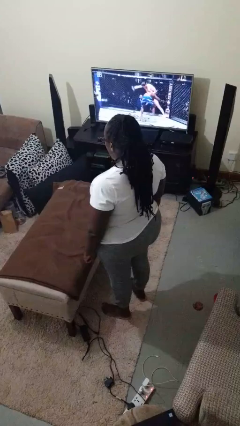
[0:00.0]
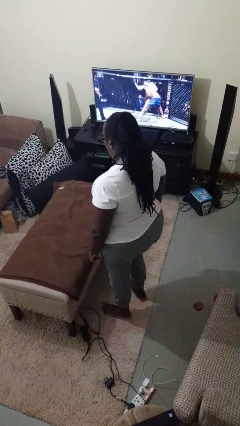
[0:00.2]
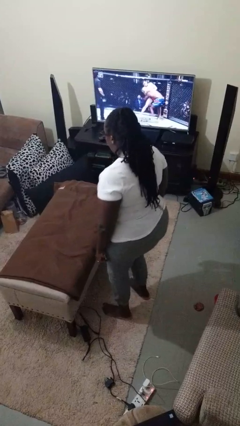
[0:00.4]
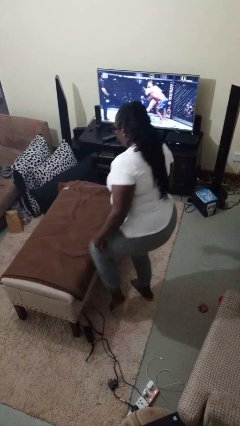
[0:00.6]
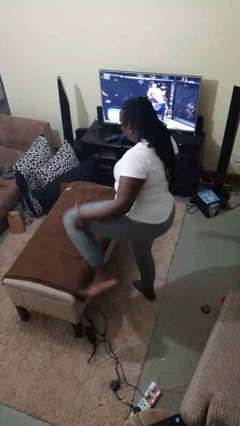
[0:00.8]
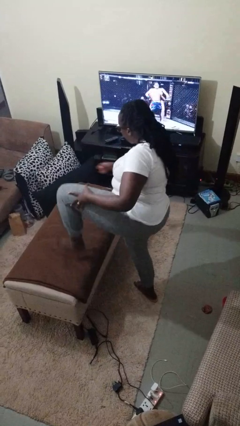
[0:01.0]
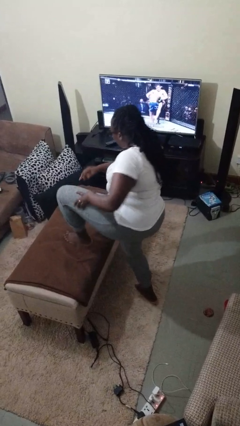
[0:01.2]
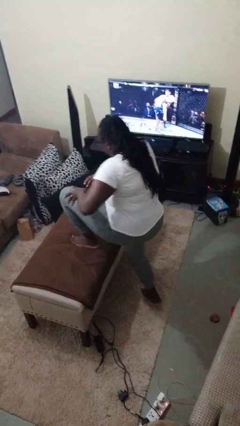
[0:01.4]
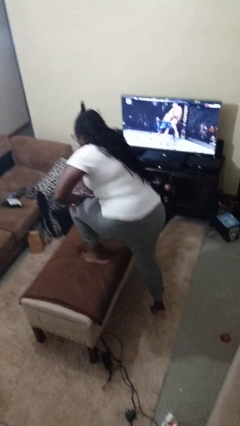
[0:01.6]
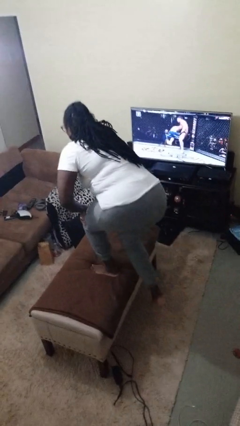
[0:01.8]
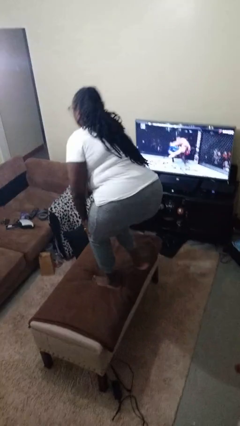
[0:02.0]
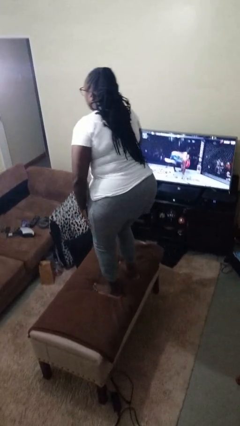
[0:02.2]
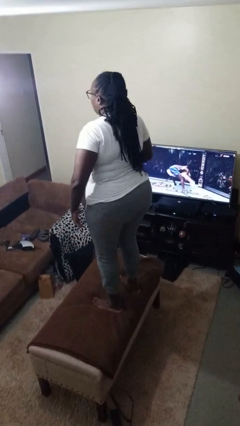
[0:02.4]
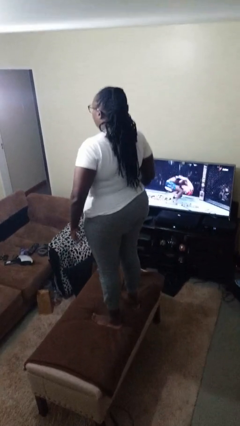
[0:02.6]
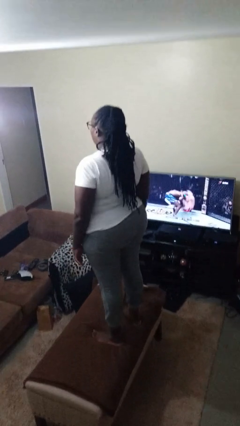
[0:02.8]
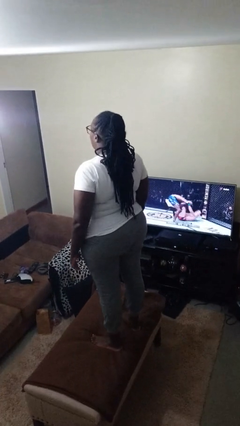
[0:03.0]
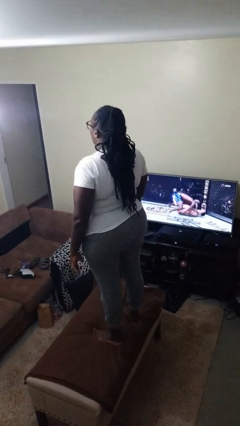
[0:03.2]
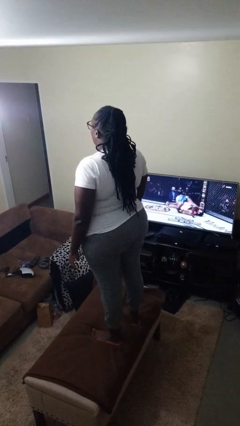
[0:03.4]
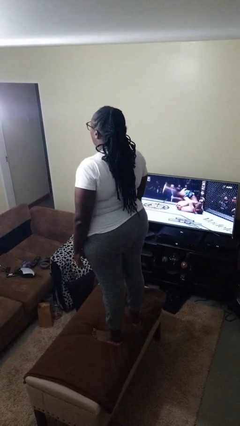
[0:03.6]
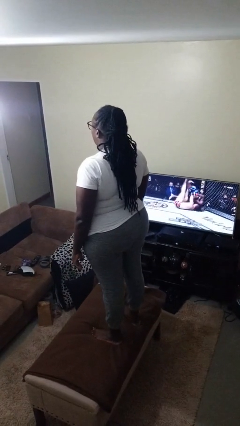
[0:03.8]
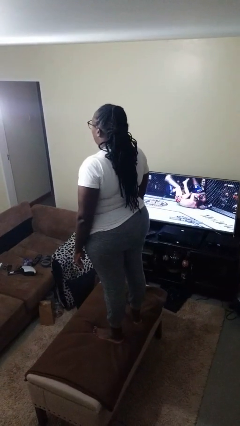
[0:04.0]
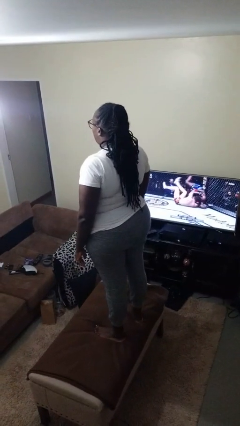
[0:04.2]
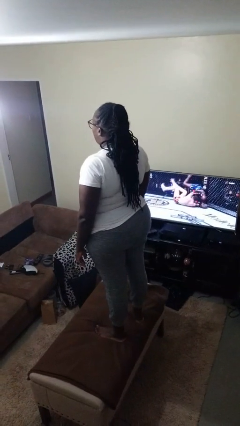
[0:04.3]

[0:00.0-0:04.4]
person climbs on table

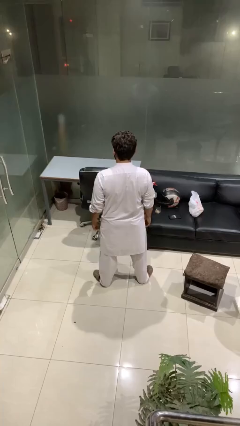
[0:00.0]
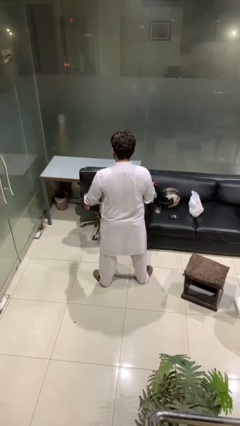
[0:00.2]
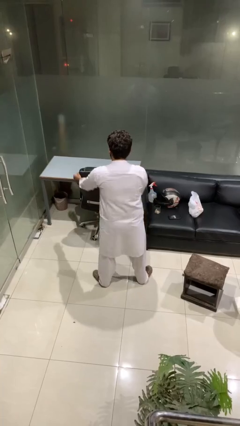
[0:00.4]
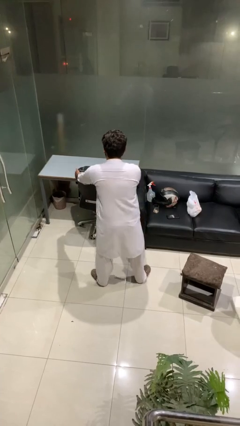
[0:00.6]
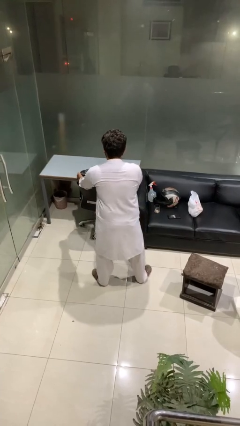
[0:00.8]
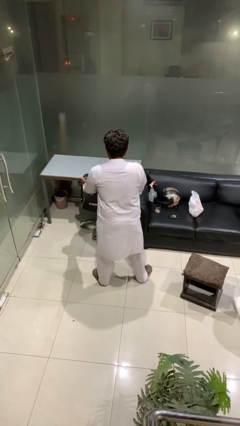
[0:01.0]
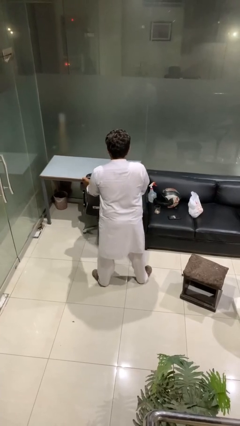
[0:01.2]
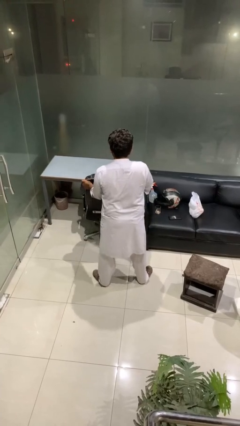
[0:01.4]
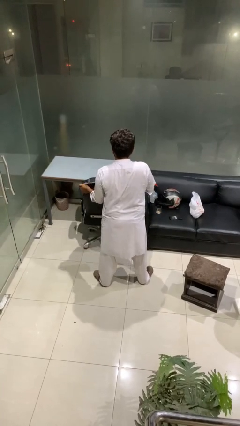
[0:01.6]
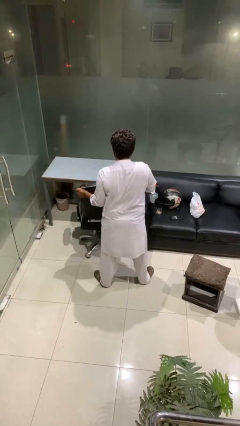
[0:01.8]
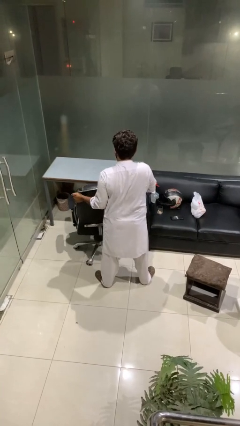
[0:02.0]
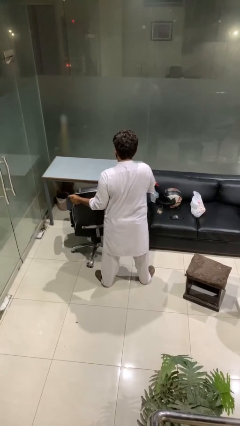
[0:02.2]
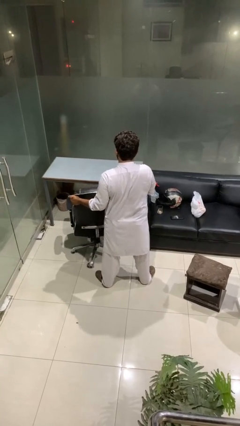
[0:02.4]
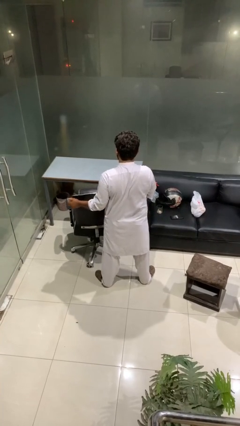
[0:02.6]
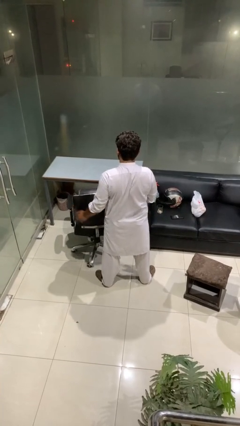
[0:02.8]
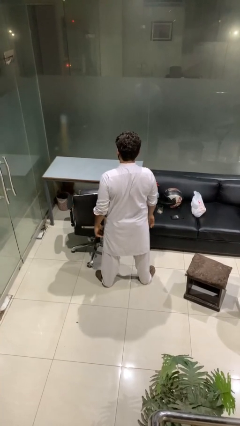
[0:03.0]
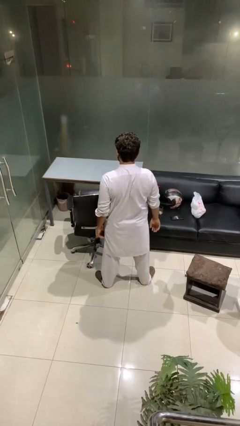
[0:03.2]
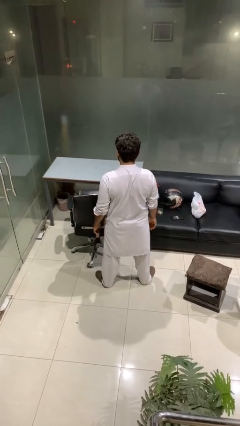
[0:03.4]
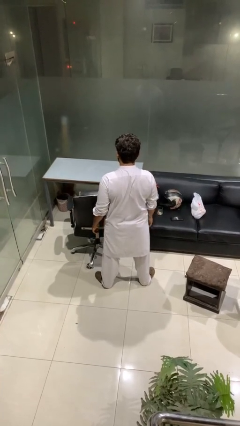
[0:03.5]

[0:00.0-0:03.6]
person pulls out chair

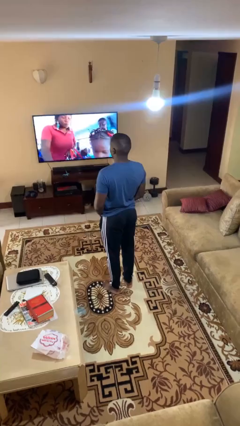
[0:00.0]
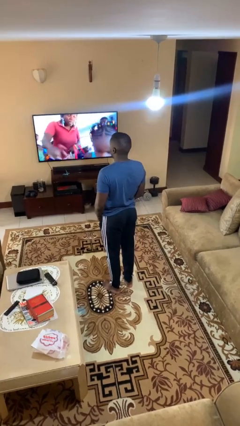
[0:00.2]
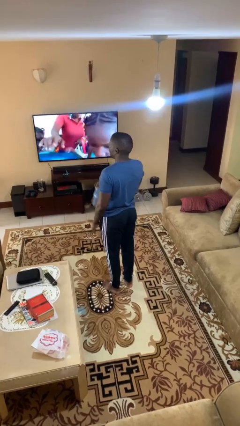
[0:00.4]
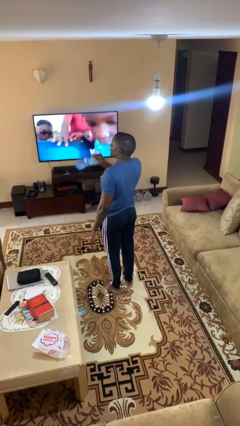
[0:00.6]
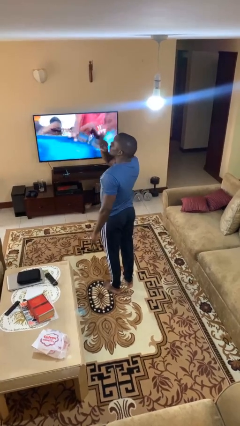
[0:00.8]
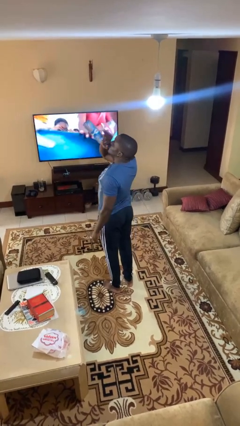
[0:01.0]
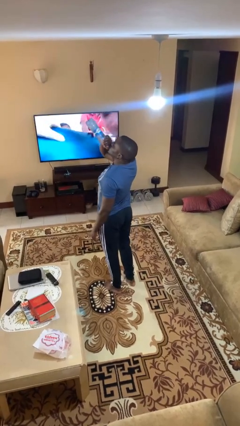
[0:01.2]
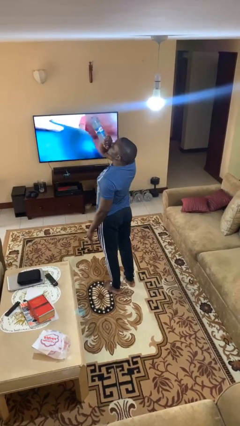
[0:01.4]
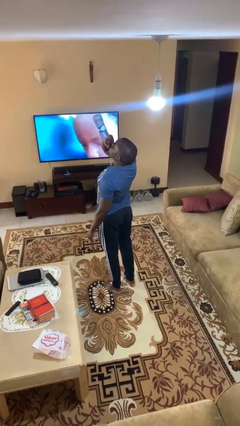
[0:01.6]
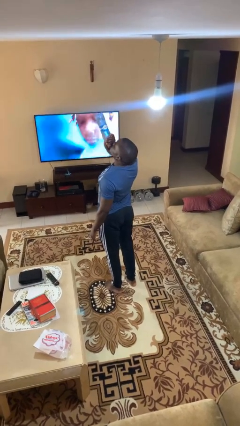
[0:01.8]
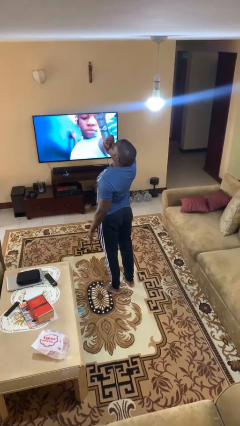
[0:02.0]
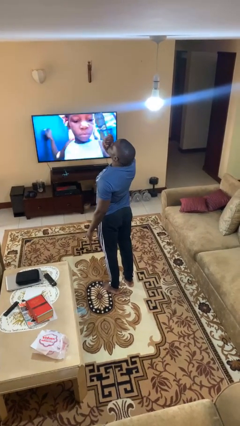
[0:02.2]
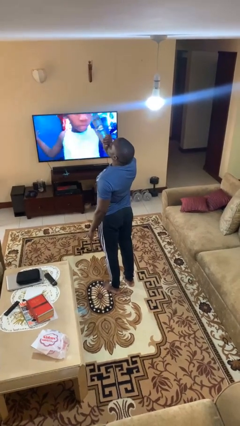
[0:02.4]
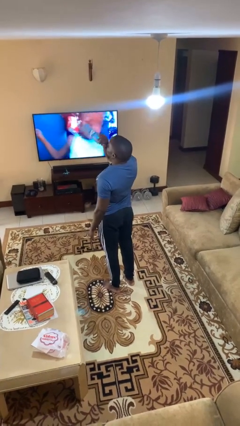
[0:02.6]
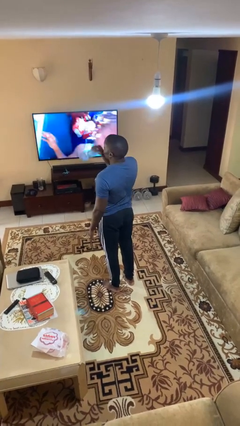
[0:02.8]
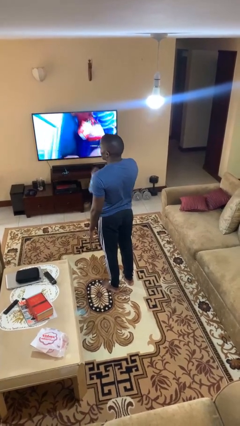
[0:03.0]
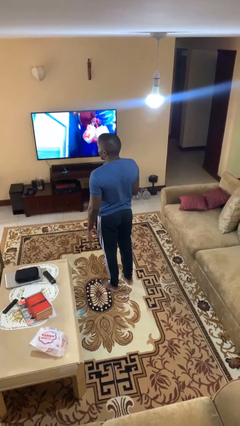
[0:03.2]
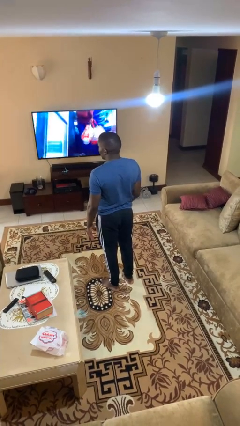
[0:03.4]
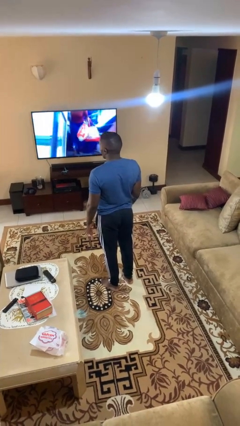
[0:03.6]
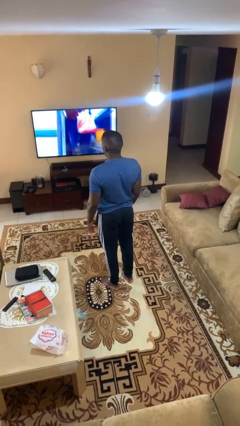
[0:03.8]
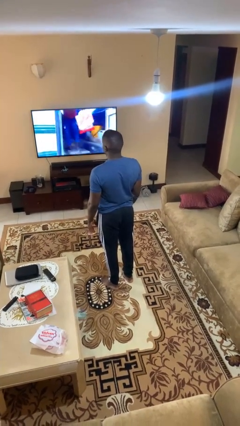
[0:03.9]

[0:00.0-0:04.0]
person drinks from bottle

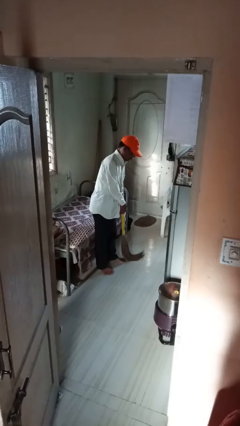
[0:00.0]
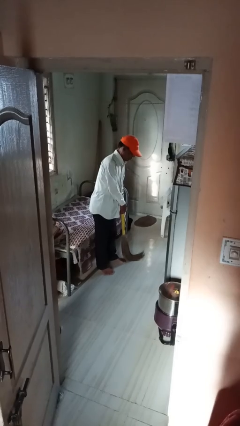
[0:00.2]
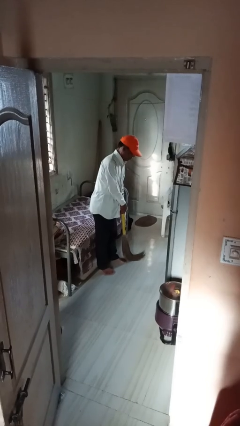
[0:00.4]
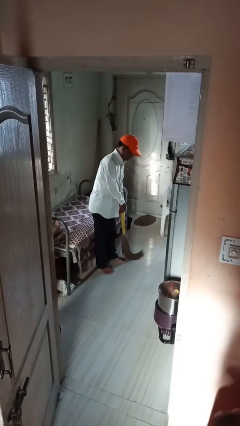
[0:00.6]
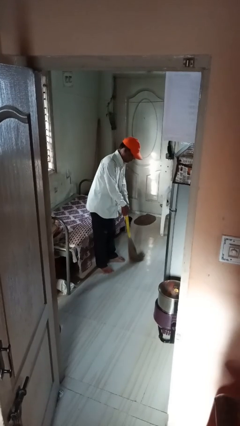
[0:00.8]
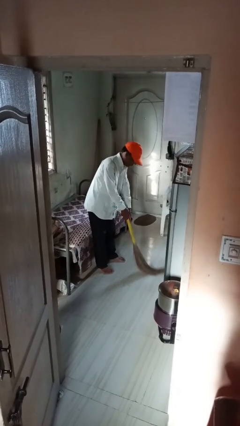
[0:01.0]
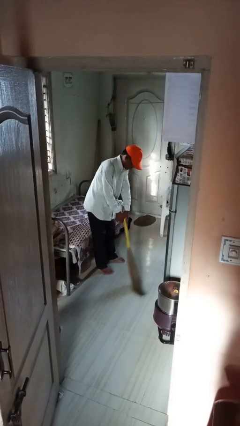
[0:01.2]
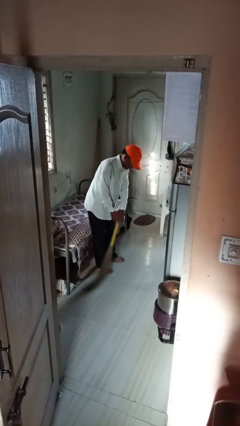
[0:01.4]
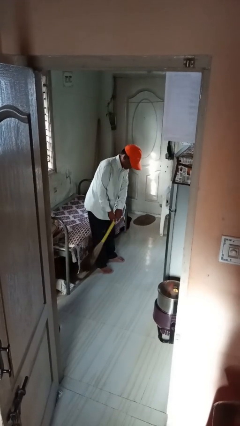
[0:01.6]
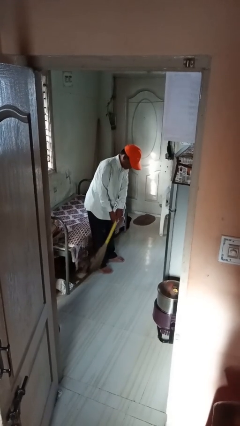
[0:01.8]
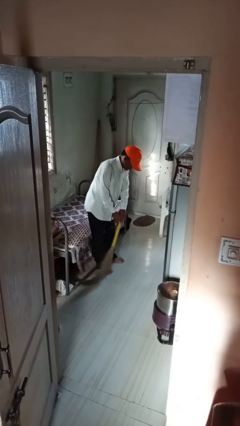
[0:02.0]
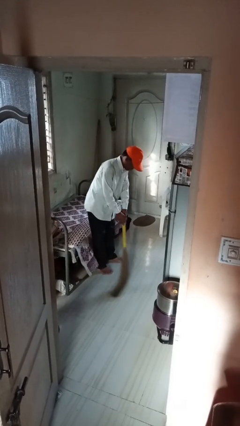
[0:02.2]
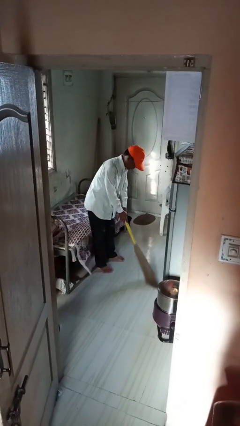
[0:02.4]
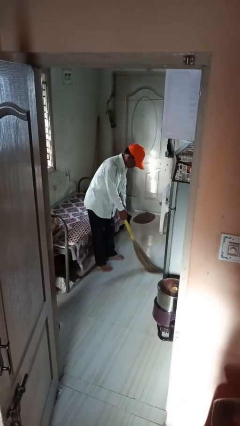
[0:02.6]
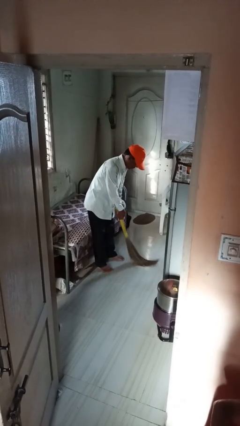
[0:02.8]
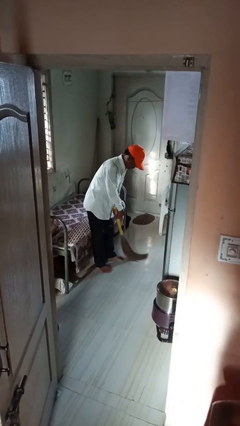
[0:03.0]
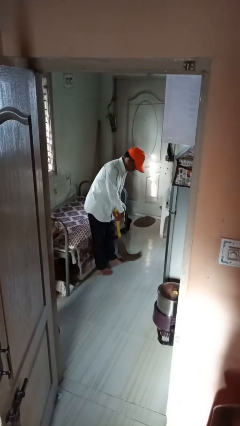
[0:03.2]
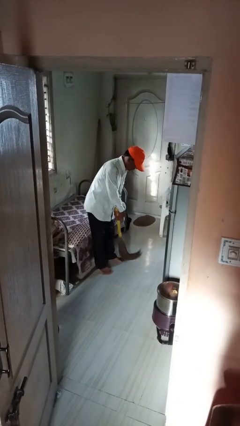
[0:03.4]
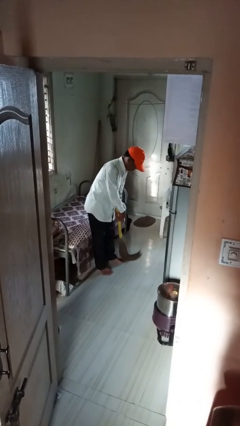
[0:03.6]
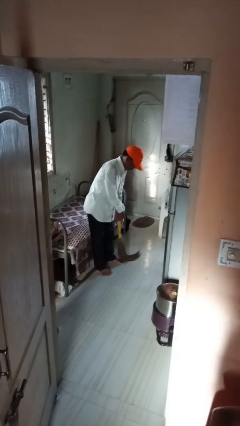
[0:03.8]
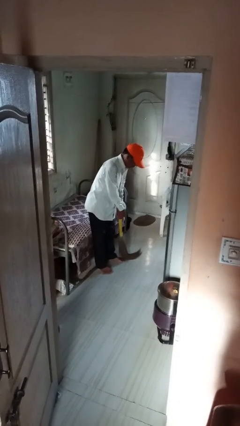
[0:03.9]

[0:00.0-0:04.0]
person sweeps floor

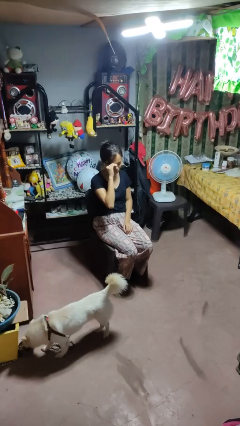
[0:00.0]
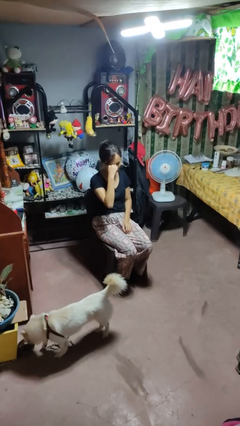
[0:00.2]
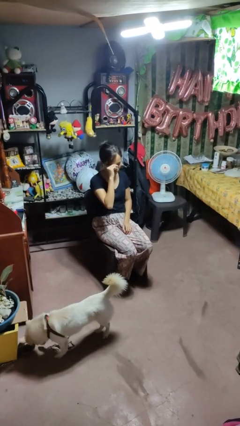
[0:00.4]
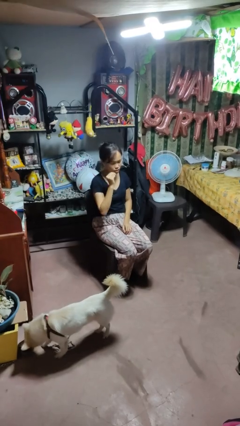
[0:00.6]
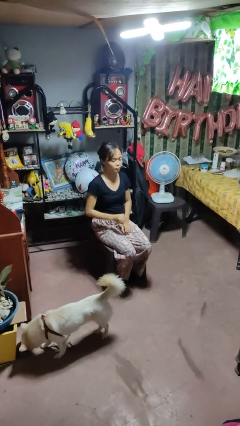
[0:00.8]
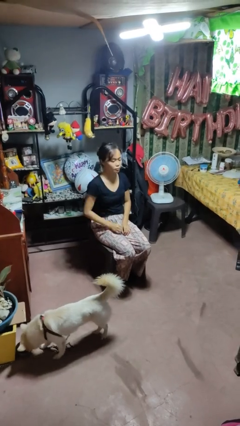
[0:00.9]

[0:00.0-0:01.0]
person rubs eyes

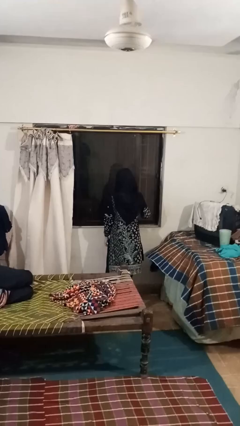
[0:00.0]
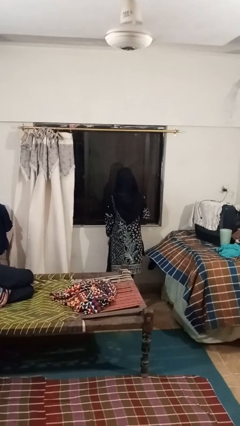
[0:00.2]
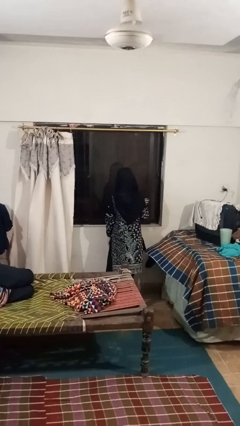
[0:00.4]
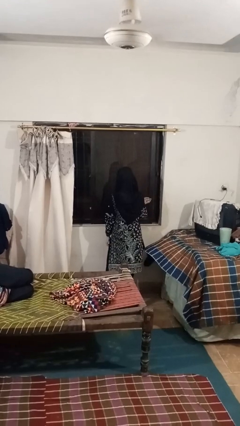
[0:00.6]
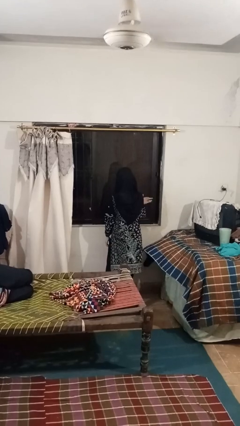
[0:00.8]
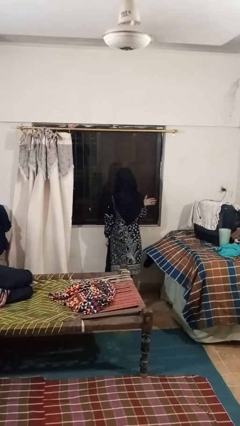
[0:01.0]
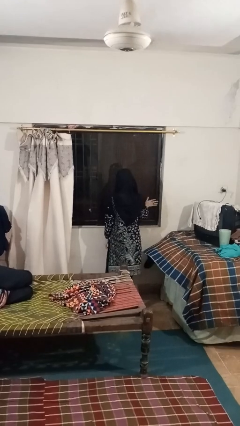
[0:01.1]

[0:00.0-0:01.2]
person closes sliding door
